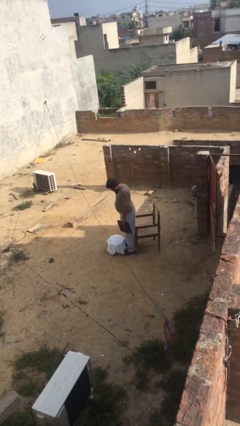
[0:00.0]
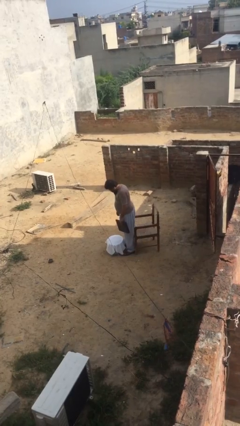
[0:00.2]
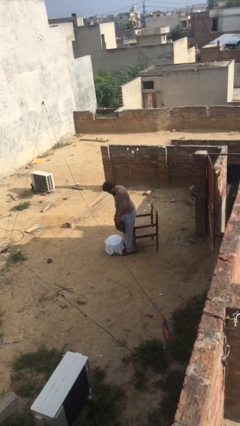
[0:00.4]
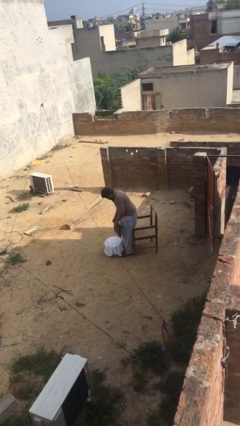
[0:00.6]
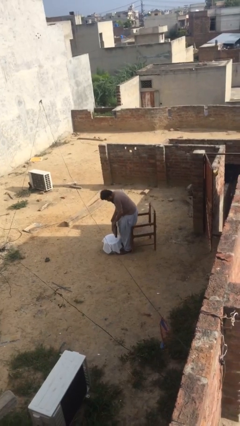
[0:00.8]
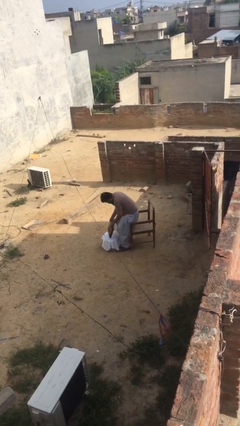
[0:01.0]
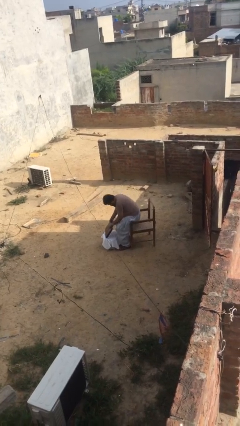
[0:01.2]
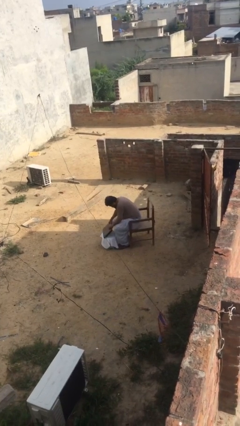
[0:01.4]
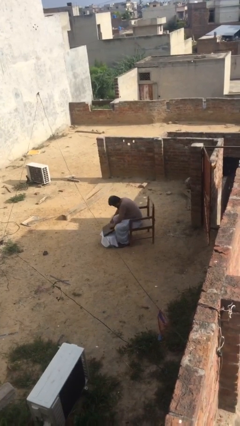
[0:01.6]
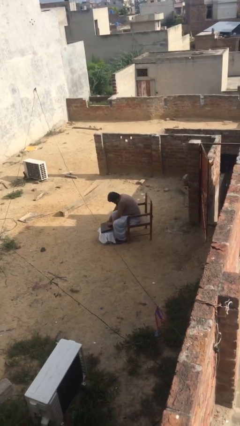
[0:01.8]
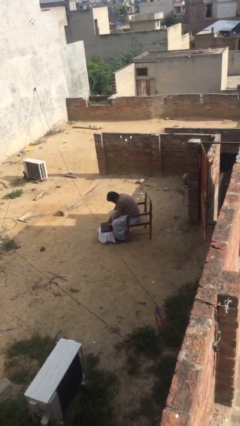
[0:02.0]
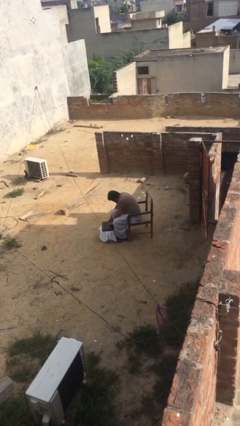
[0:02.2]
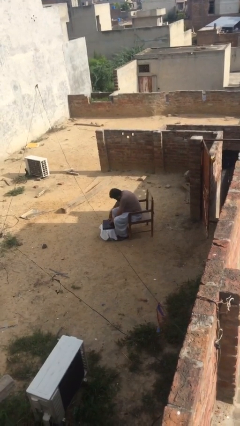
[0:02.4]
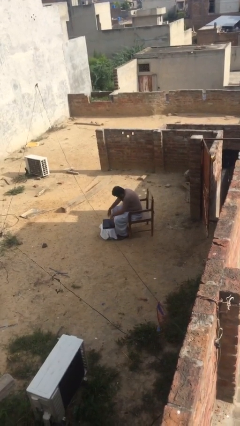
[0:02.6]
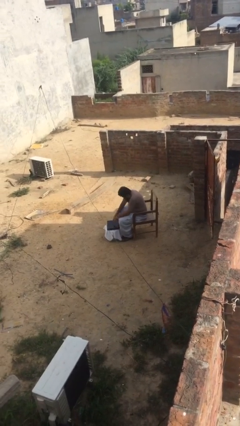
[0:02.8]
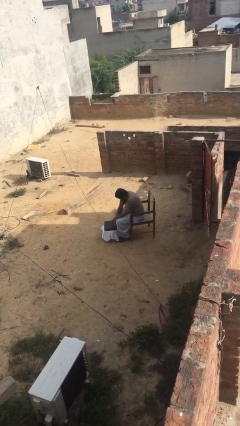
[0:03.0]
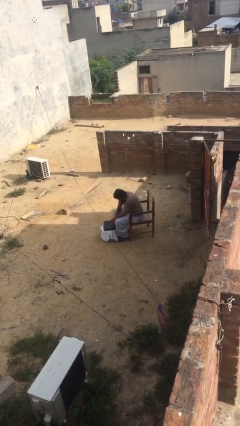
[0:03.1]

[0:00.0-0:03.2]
person sits down

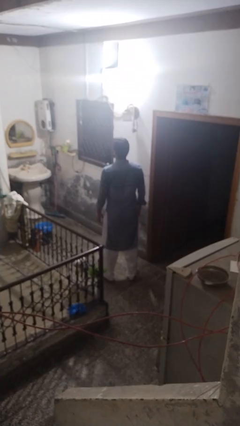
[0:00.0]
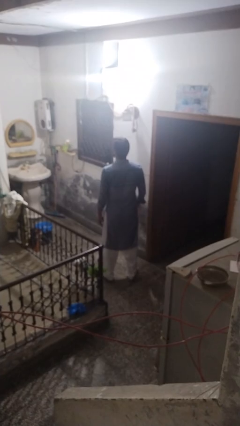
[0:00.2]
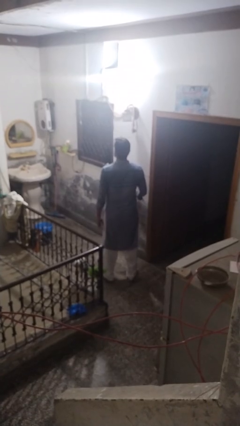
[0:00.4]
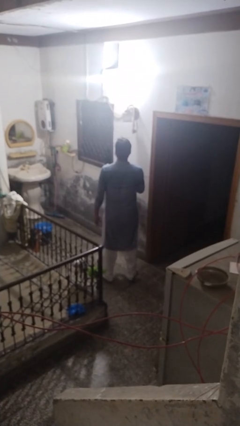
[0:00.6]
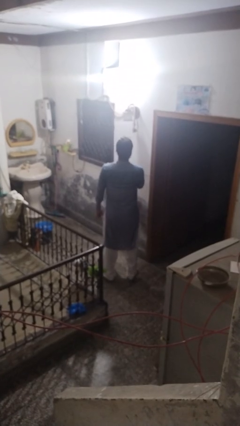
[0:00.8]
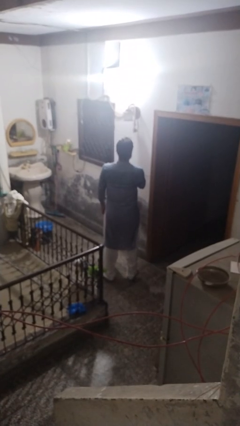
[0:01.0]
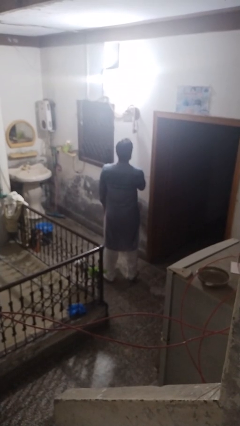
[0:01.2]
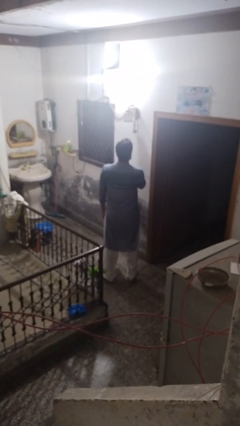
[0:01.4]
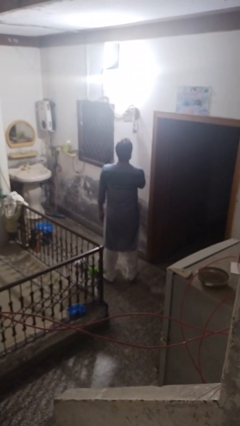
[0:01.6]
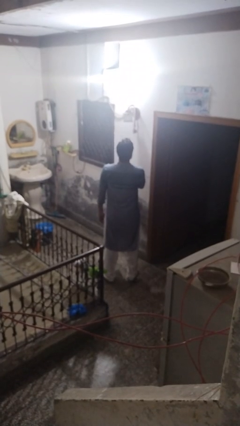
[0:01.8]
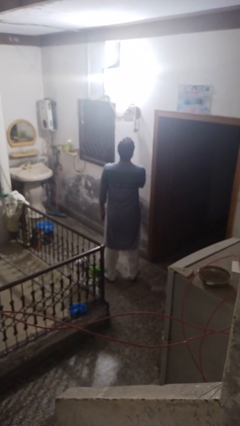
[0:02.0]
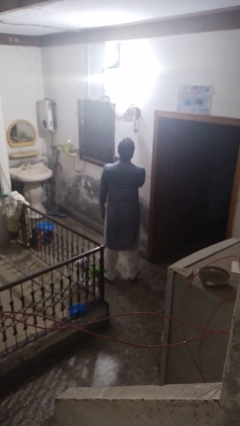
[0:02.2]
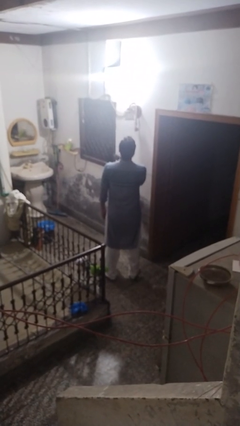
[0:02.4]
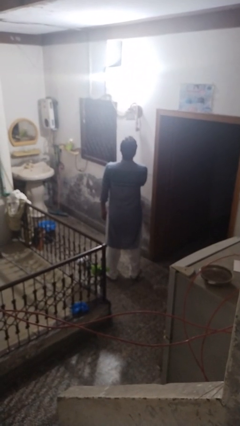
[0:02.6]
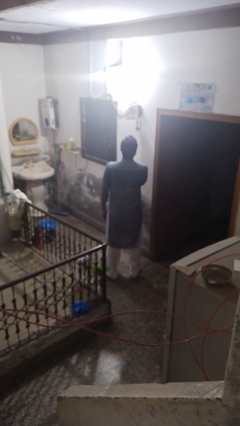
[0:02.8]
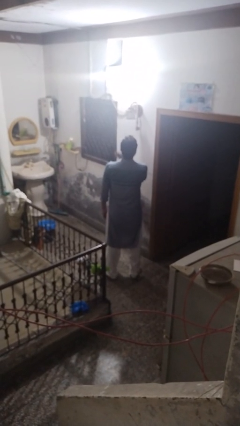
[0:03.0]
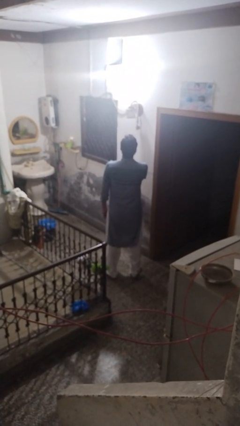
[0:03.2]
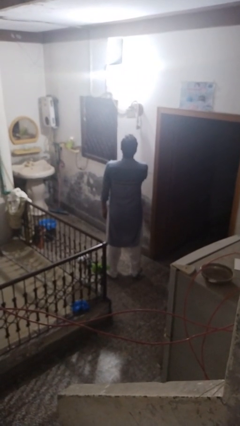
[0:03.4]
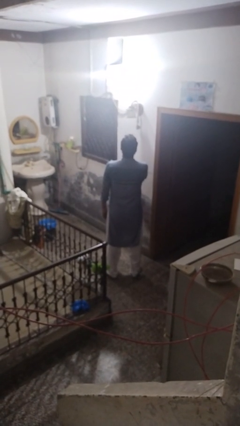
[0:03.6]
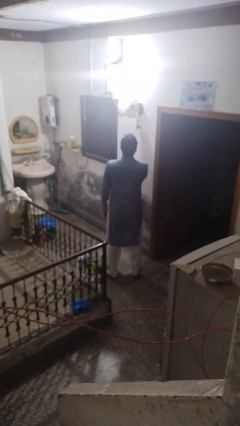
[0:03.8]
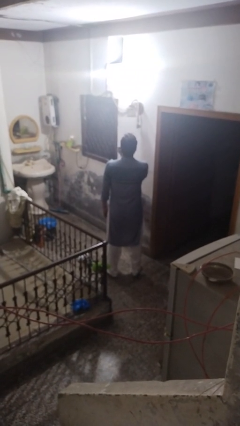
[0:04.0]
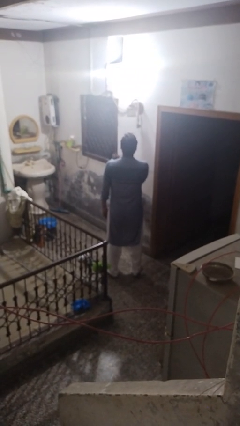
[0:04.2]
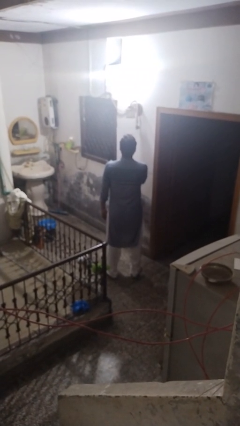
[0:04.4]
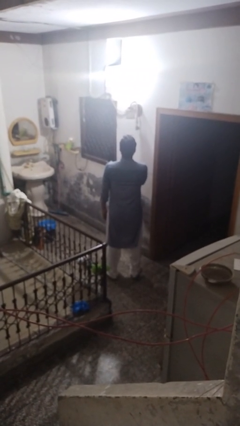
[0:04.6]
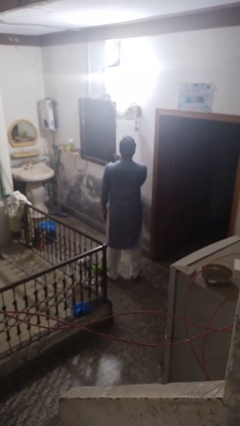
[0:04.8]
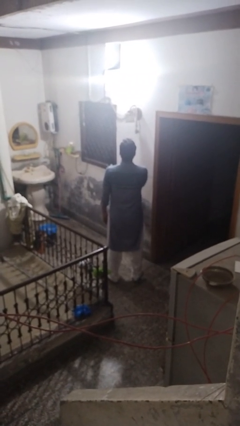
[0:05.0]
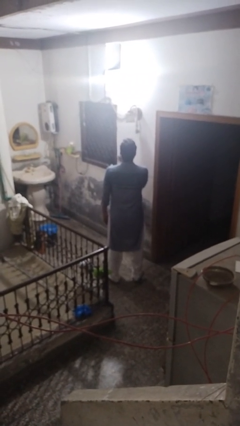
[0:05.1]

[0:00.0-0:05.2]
person drums on chest

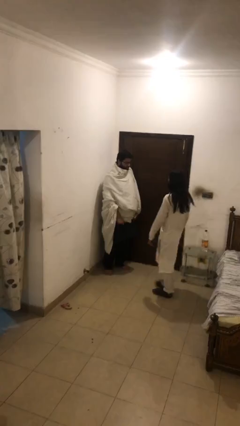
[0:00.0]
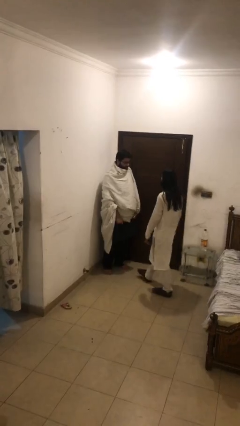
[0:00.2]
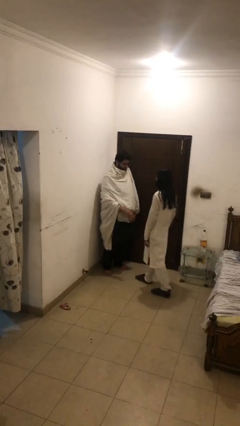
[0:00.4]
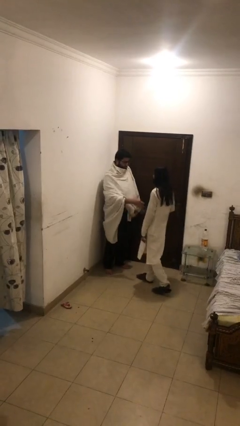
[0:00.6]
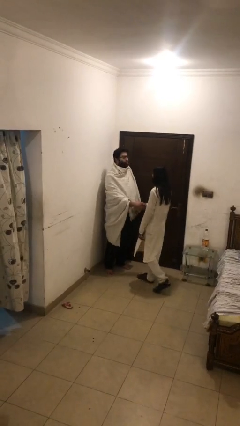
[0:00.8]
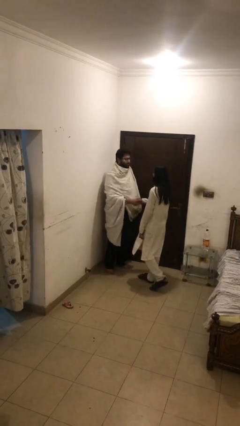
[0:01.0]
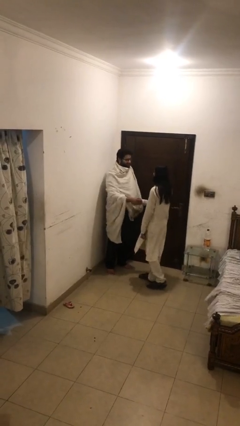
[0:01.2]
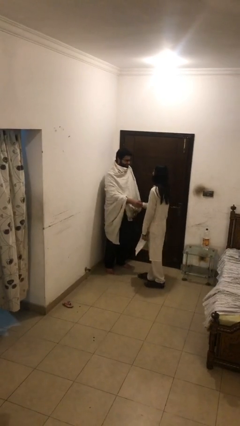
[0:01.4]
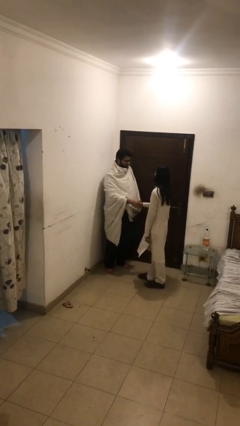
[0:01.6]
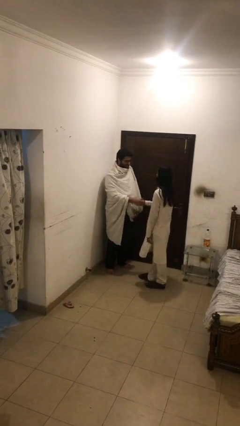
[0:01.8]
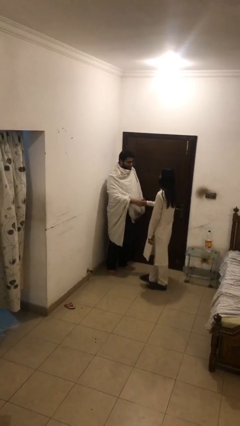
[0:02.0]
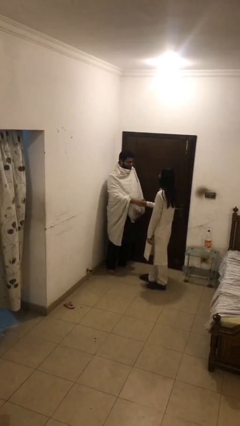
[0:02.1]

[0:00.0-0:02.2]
person shakes hand

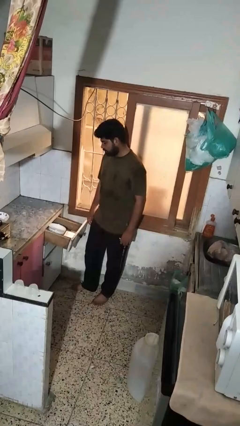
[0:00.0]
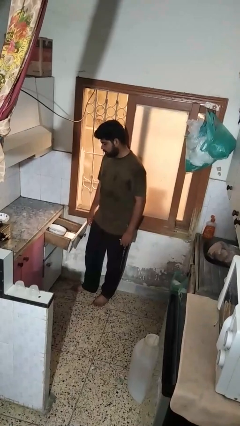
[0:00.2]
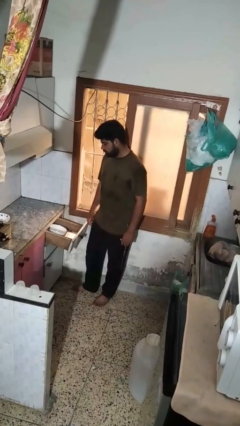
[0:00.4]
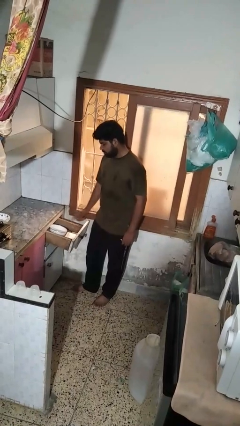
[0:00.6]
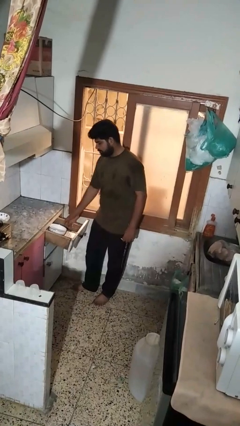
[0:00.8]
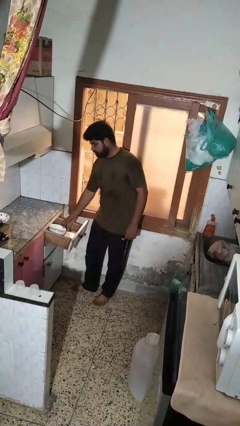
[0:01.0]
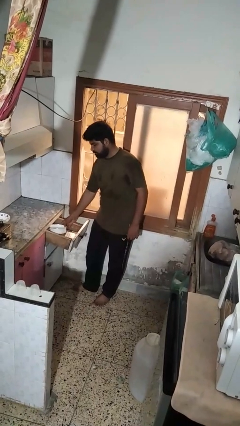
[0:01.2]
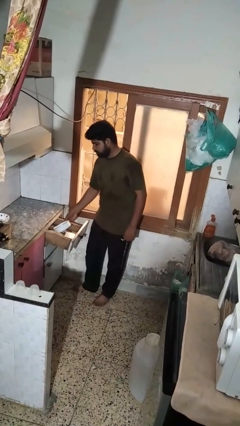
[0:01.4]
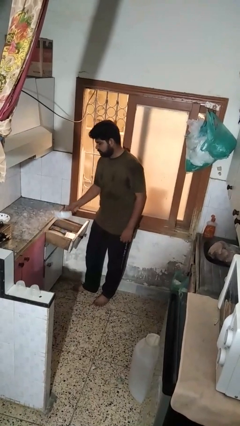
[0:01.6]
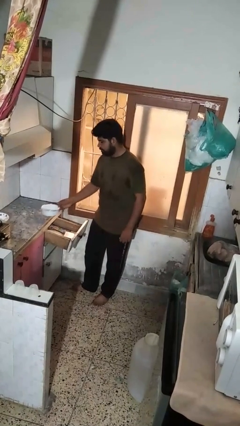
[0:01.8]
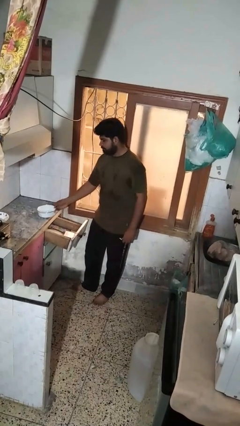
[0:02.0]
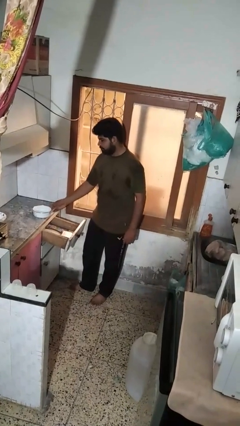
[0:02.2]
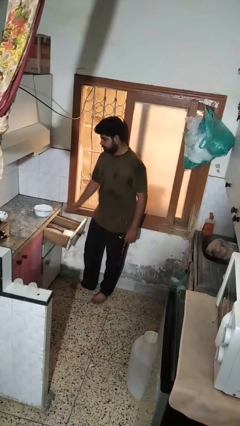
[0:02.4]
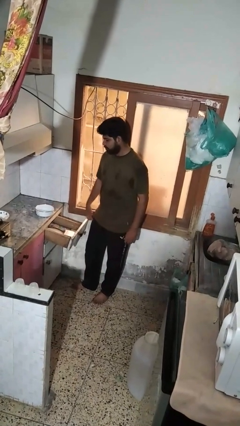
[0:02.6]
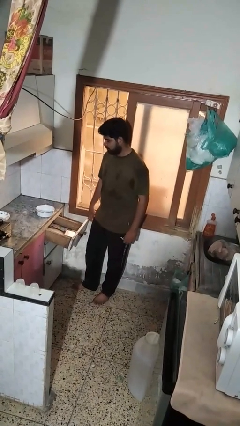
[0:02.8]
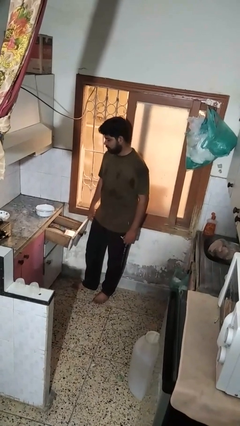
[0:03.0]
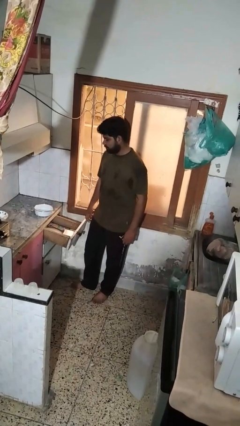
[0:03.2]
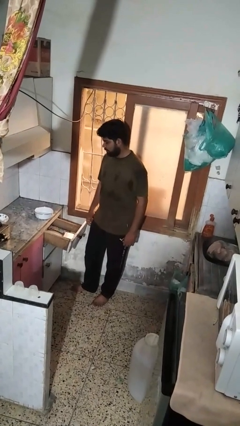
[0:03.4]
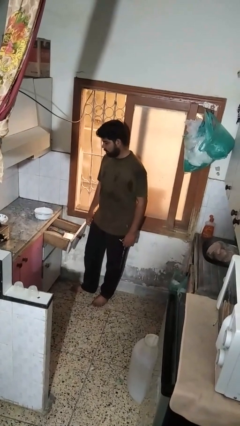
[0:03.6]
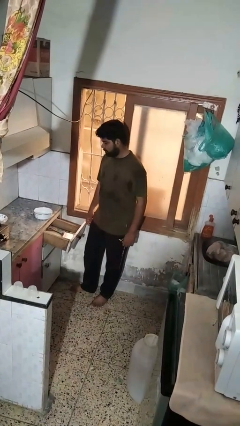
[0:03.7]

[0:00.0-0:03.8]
person takes object from kitchen drawer

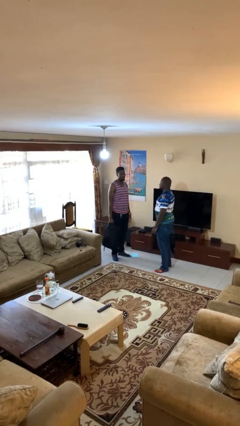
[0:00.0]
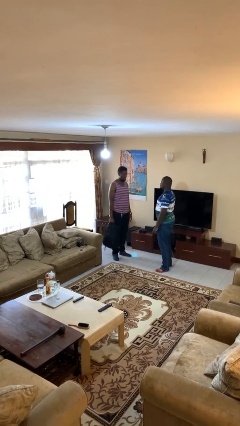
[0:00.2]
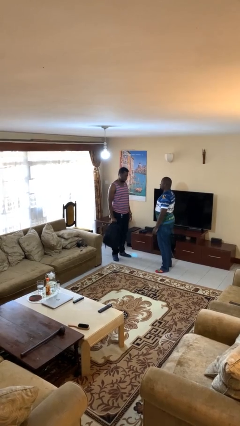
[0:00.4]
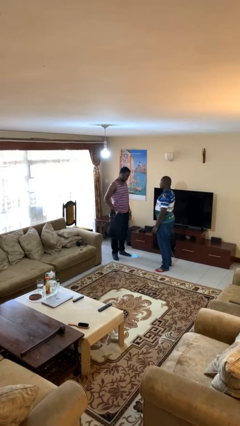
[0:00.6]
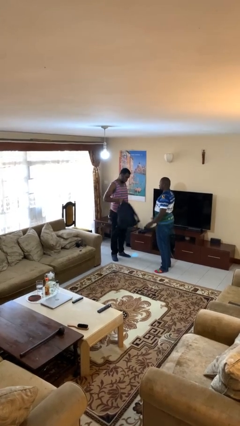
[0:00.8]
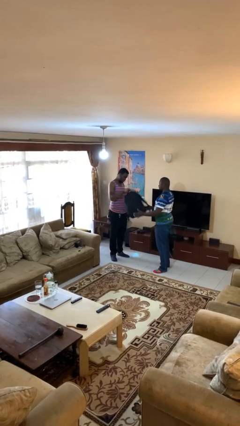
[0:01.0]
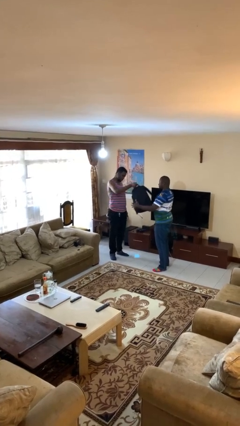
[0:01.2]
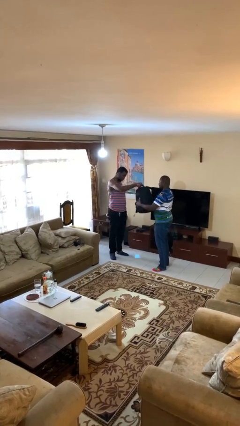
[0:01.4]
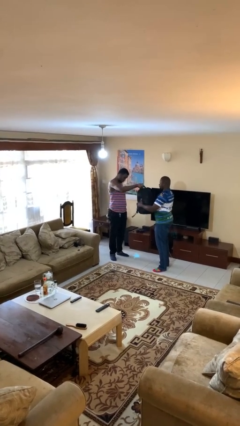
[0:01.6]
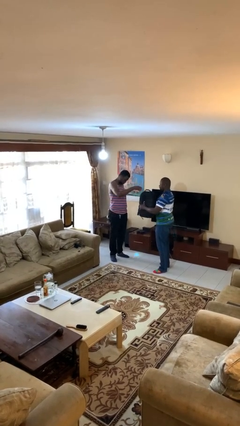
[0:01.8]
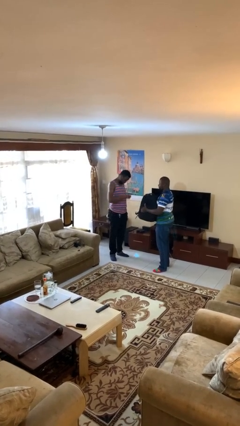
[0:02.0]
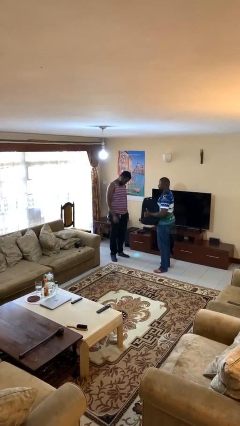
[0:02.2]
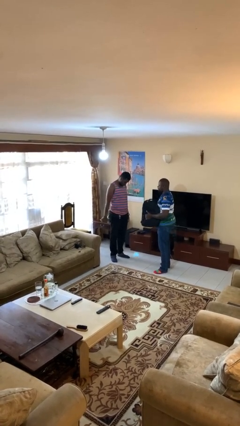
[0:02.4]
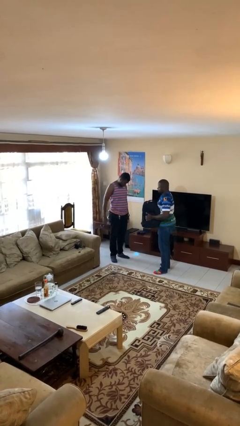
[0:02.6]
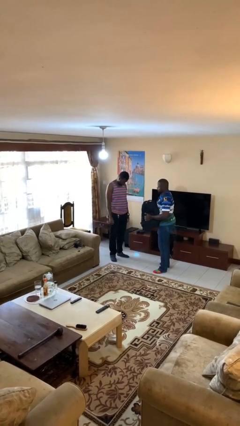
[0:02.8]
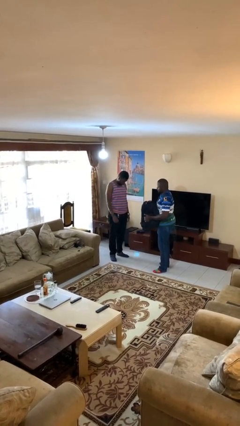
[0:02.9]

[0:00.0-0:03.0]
person transfers object to person

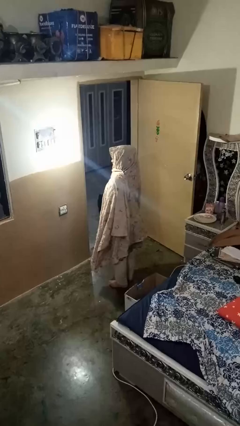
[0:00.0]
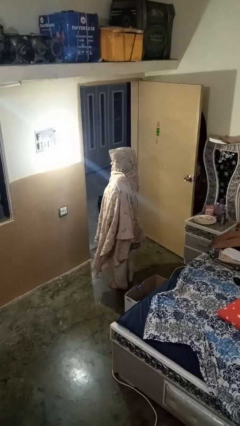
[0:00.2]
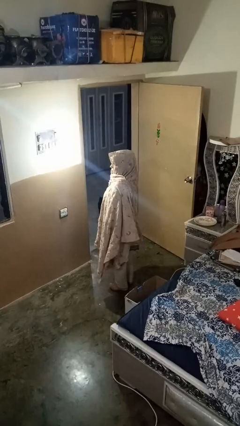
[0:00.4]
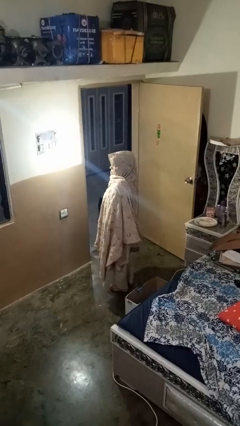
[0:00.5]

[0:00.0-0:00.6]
person bumps into wall
